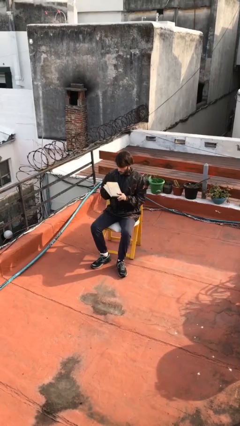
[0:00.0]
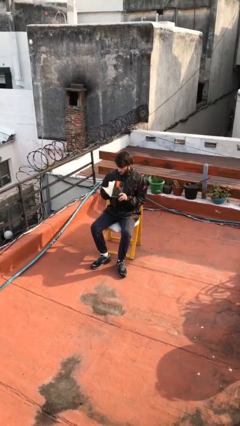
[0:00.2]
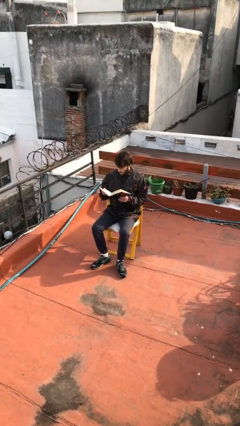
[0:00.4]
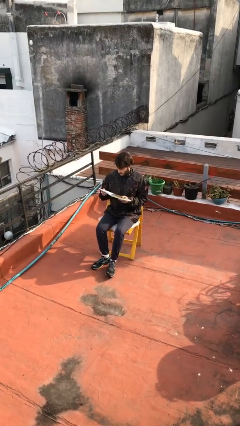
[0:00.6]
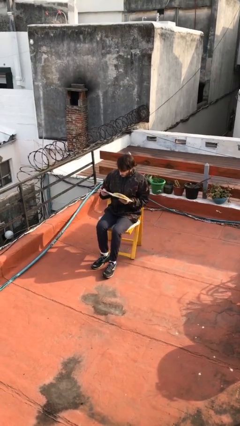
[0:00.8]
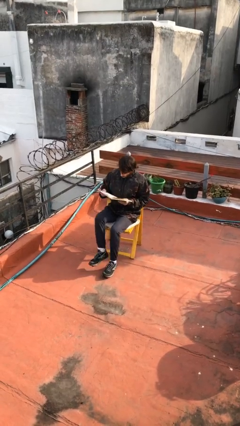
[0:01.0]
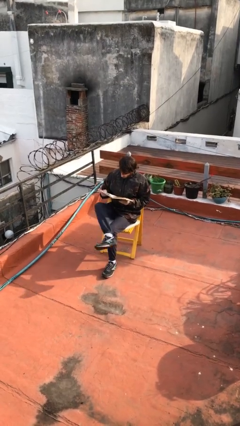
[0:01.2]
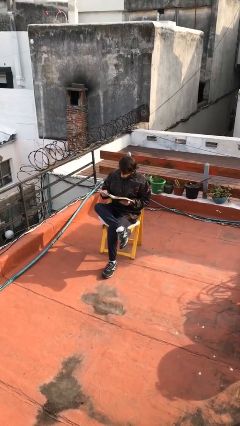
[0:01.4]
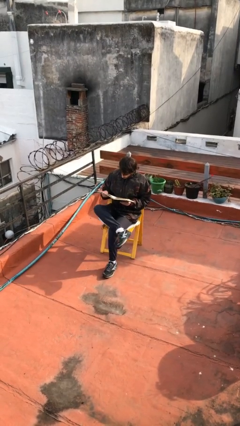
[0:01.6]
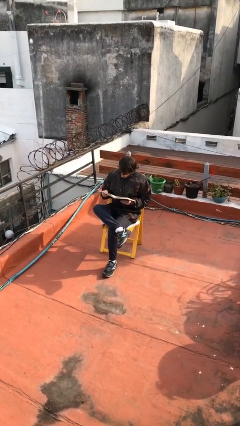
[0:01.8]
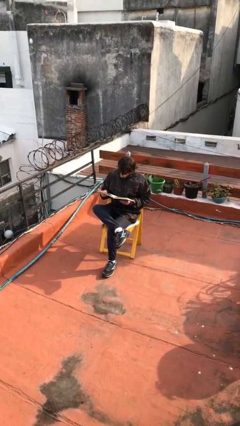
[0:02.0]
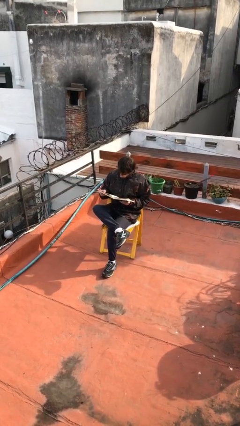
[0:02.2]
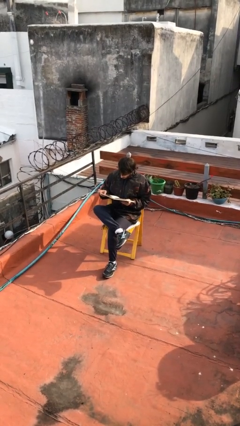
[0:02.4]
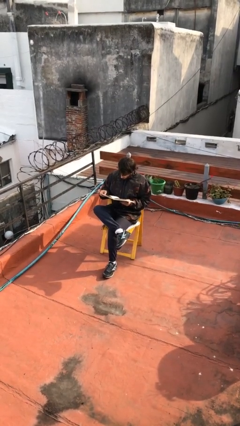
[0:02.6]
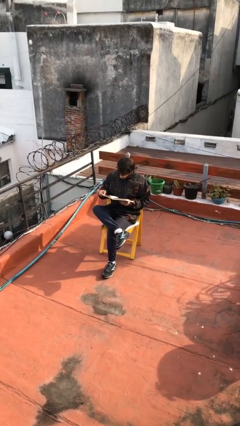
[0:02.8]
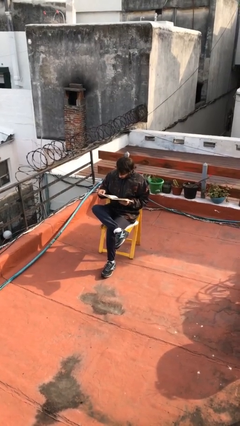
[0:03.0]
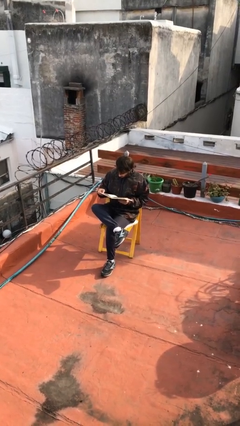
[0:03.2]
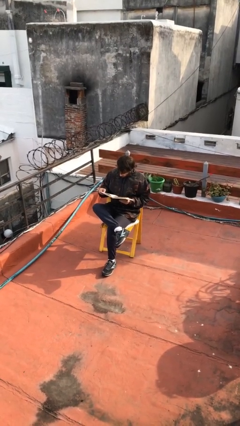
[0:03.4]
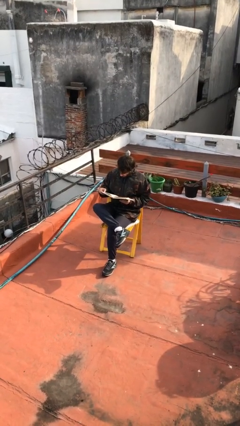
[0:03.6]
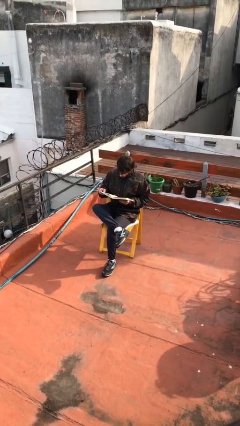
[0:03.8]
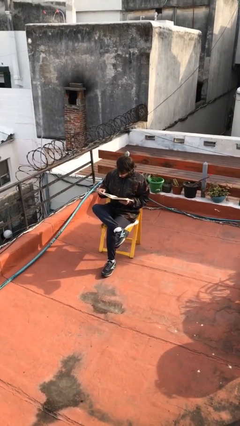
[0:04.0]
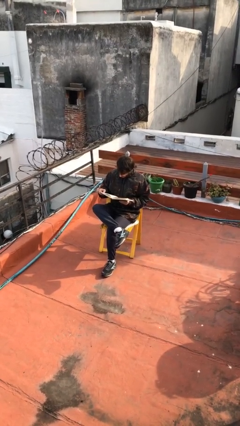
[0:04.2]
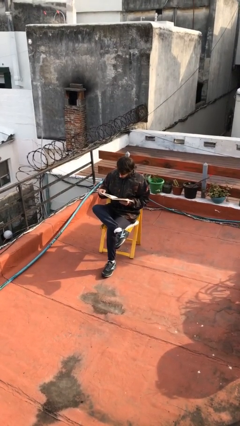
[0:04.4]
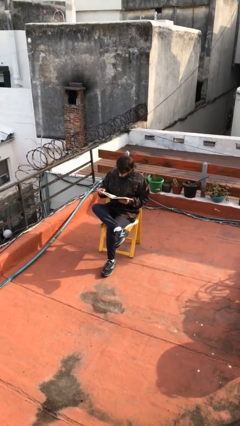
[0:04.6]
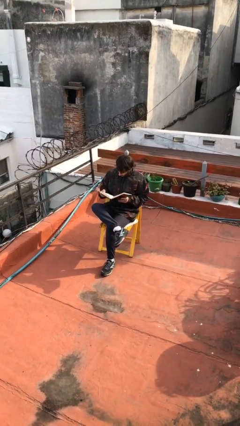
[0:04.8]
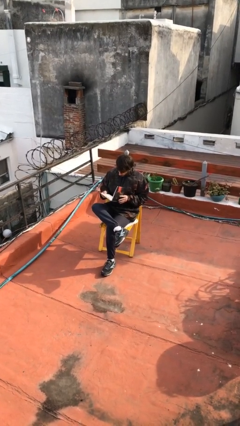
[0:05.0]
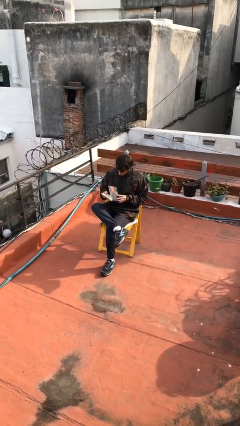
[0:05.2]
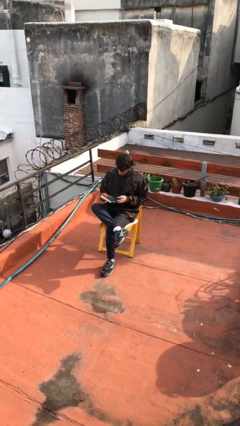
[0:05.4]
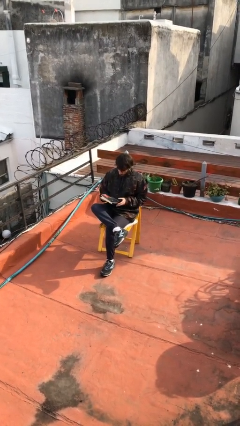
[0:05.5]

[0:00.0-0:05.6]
person reads book

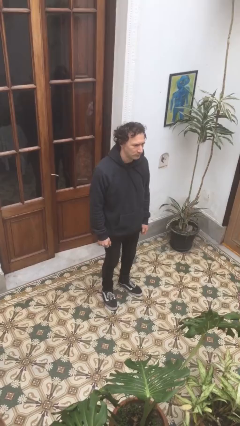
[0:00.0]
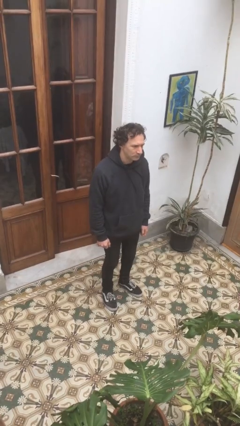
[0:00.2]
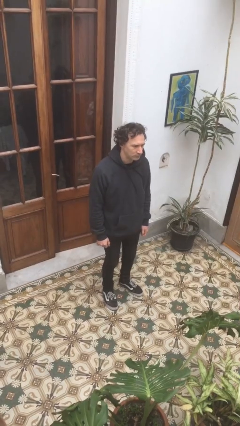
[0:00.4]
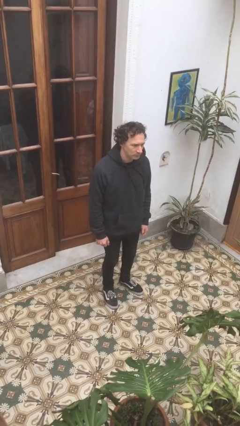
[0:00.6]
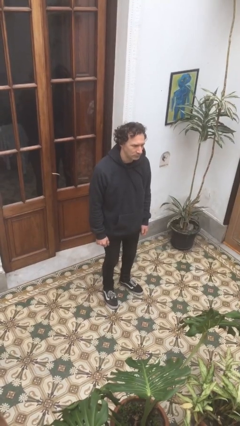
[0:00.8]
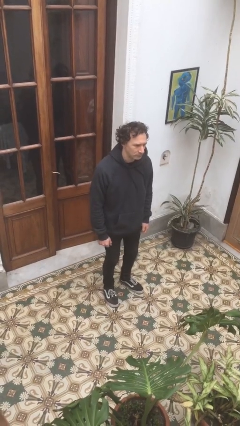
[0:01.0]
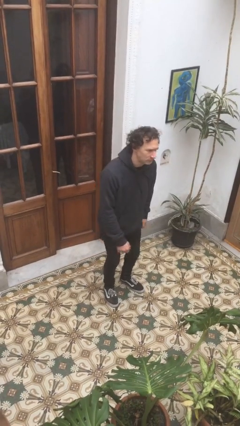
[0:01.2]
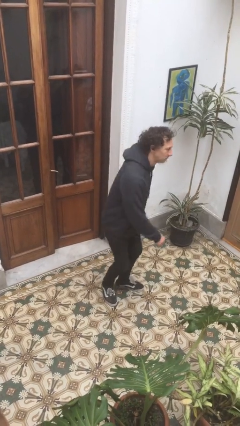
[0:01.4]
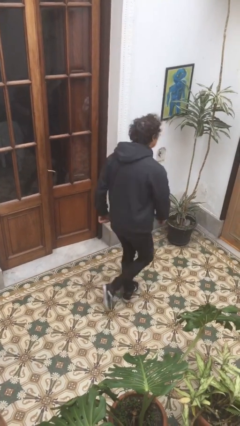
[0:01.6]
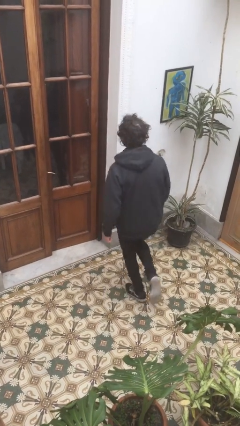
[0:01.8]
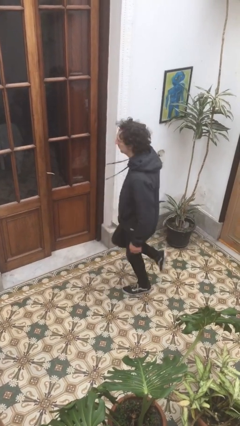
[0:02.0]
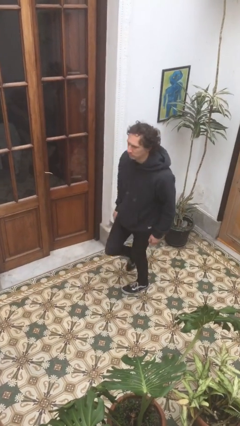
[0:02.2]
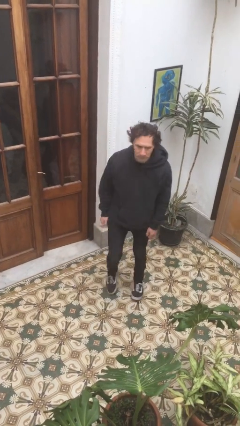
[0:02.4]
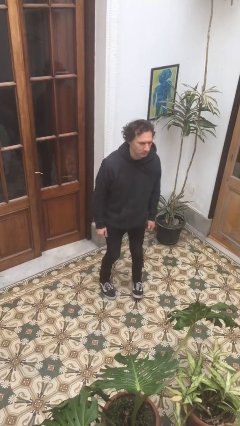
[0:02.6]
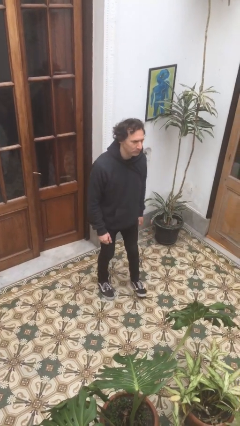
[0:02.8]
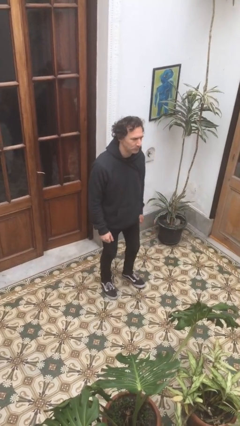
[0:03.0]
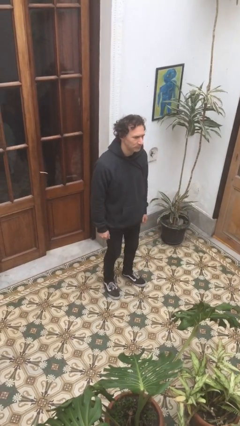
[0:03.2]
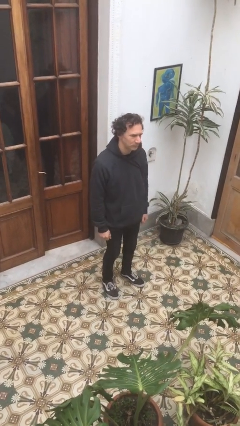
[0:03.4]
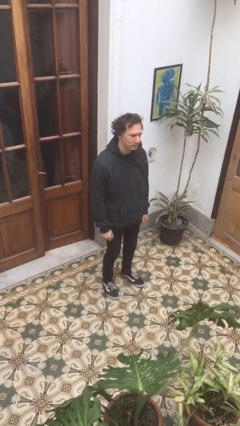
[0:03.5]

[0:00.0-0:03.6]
person twirls

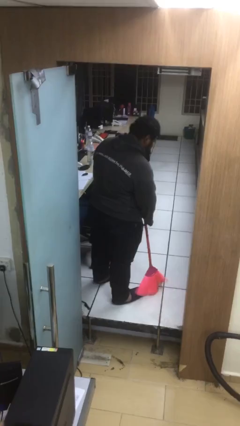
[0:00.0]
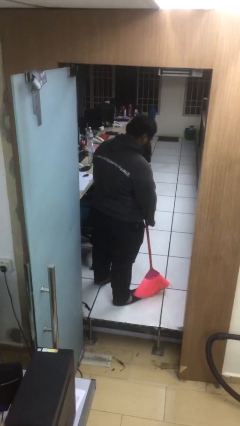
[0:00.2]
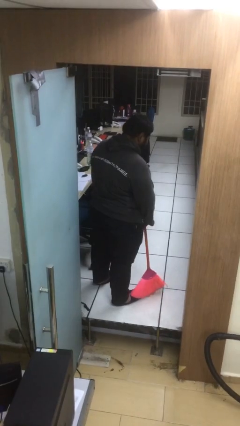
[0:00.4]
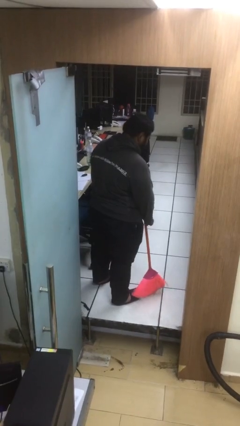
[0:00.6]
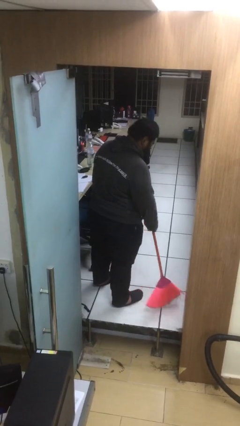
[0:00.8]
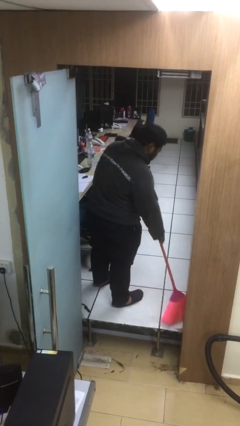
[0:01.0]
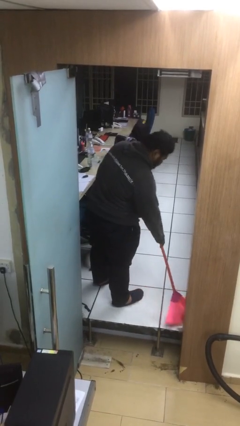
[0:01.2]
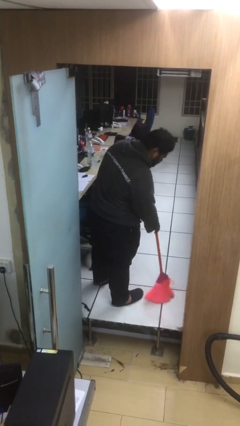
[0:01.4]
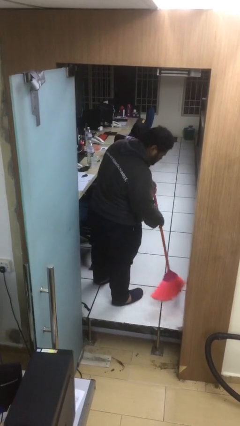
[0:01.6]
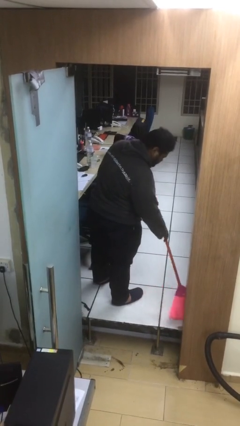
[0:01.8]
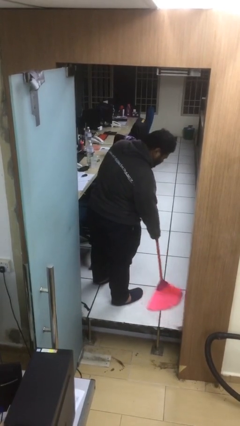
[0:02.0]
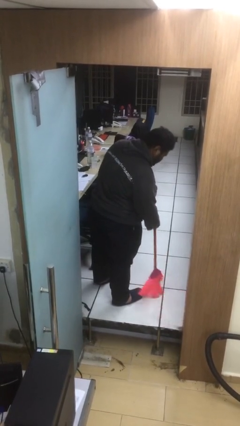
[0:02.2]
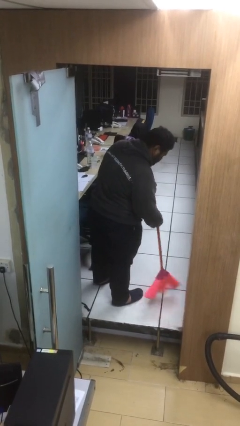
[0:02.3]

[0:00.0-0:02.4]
person sweeps floor

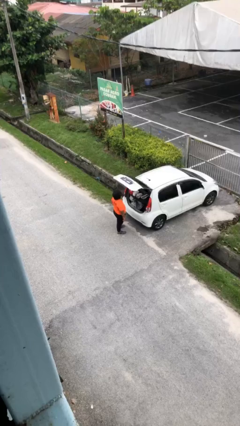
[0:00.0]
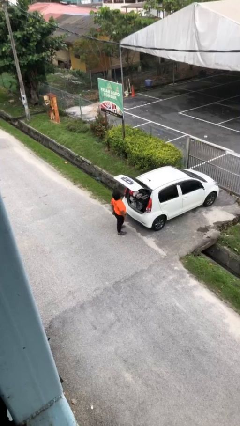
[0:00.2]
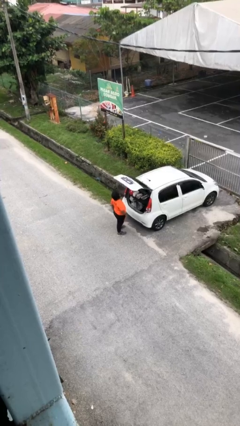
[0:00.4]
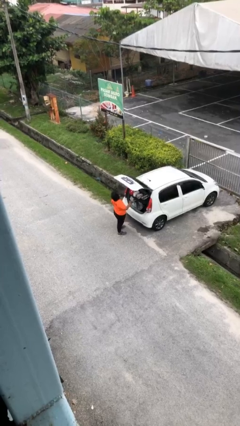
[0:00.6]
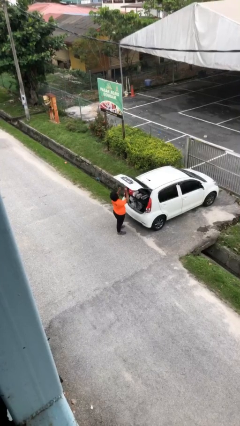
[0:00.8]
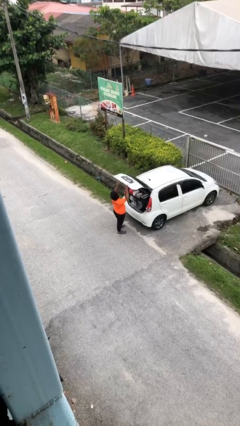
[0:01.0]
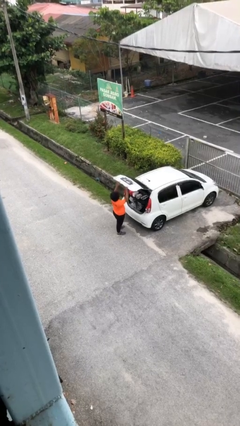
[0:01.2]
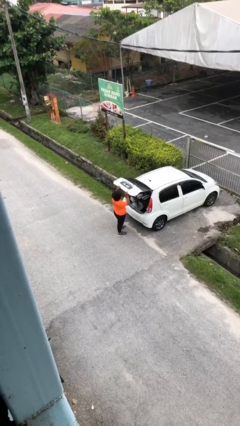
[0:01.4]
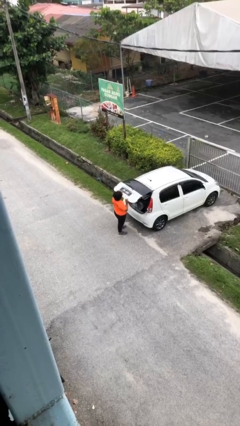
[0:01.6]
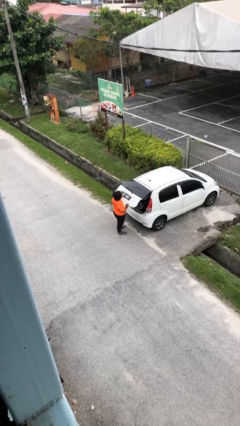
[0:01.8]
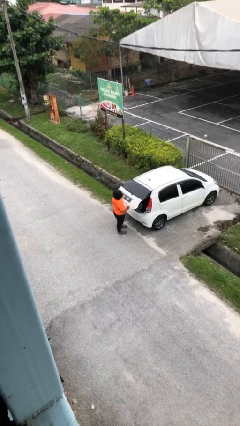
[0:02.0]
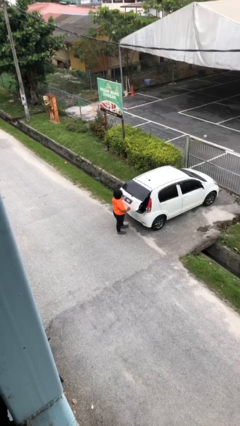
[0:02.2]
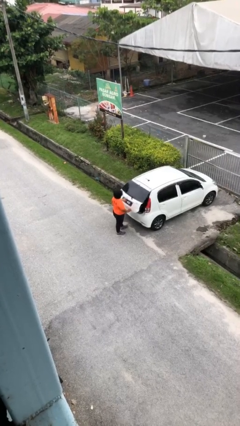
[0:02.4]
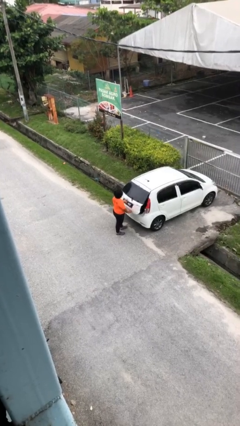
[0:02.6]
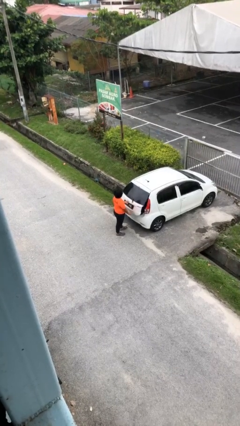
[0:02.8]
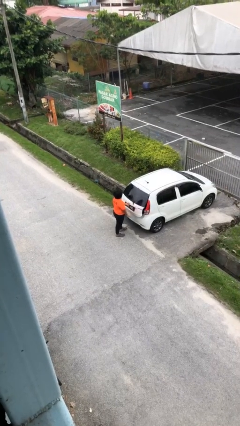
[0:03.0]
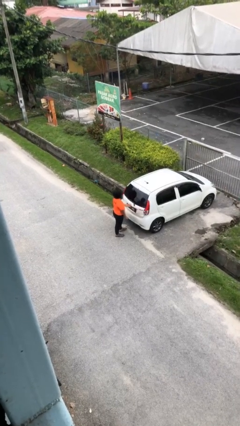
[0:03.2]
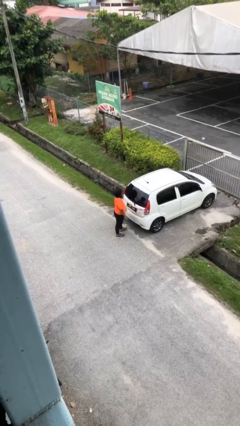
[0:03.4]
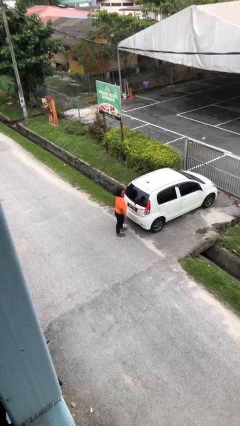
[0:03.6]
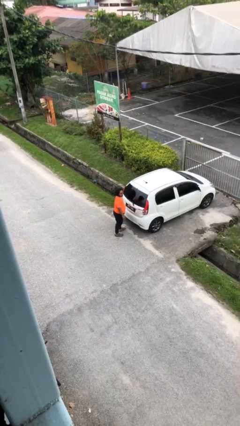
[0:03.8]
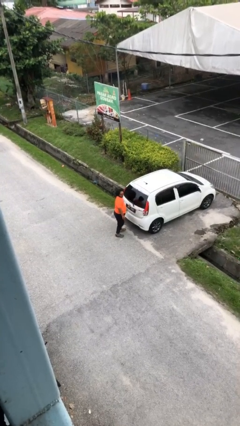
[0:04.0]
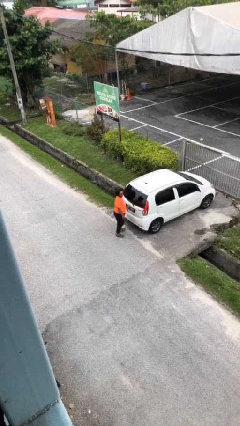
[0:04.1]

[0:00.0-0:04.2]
person closes car trunk

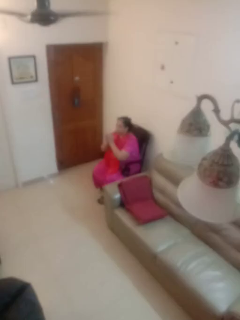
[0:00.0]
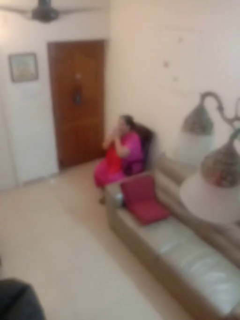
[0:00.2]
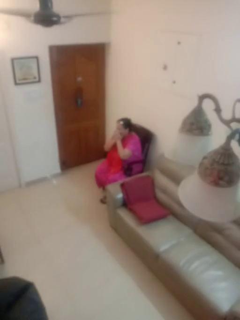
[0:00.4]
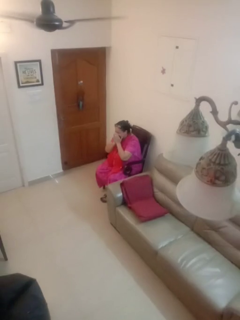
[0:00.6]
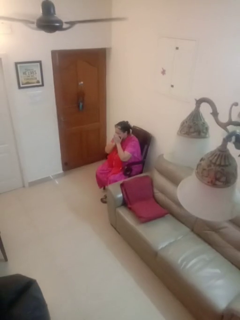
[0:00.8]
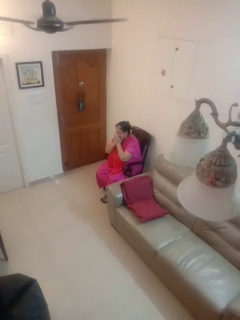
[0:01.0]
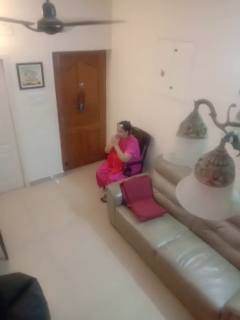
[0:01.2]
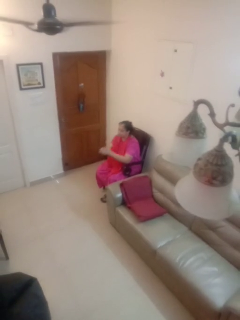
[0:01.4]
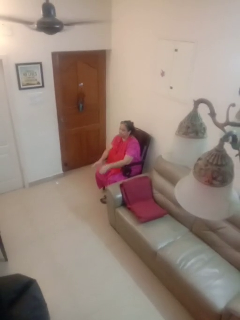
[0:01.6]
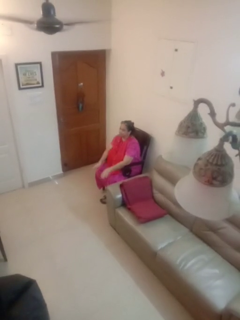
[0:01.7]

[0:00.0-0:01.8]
person sneezes into hand

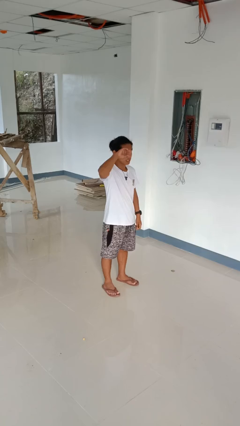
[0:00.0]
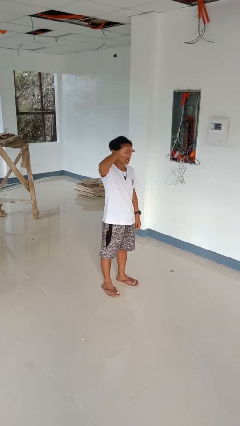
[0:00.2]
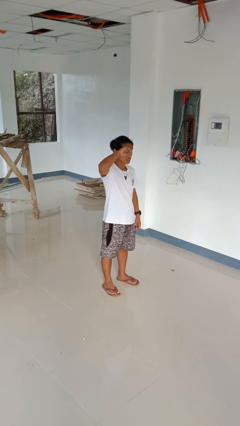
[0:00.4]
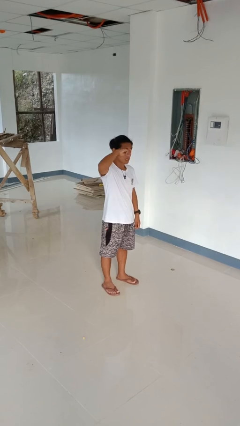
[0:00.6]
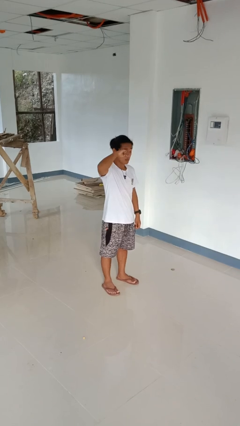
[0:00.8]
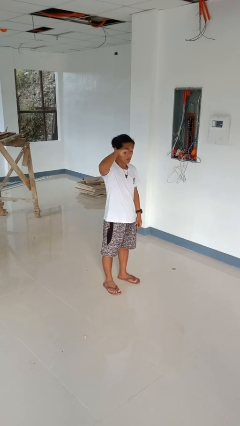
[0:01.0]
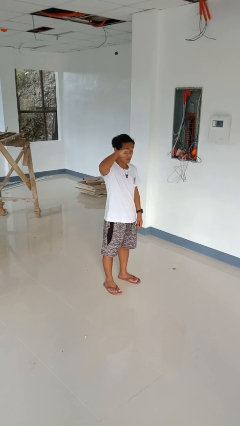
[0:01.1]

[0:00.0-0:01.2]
person rubs eyes
